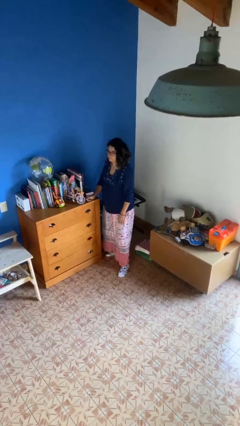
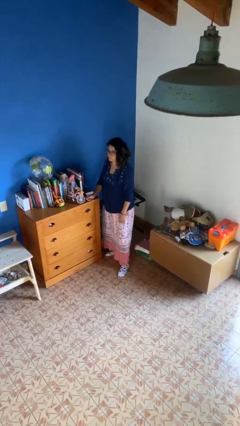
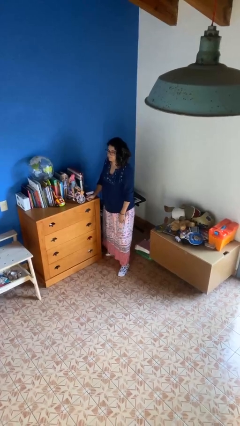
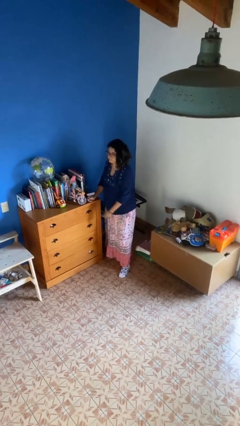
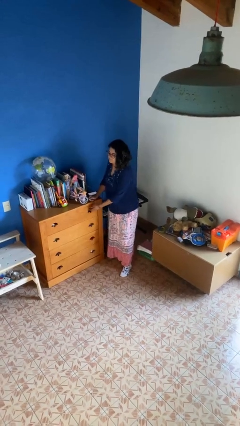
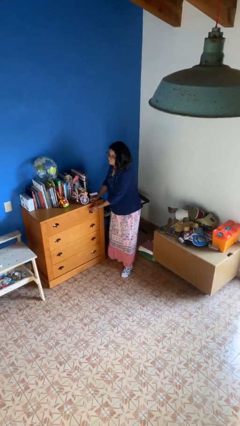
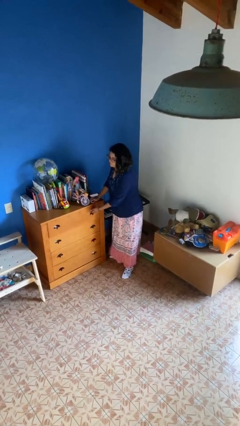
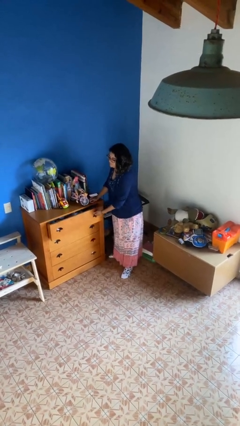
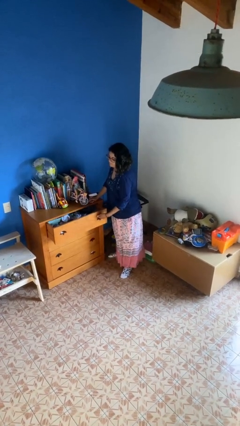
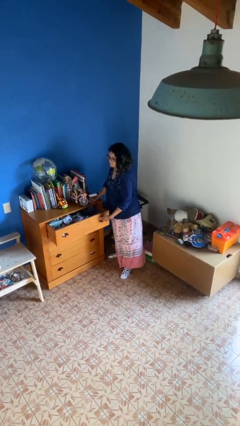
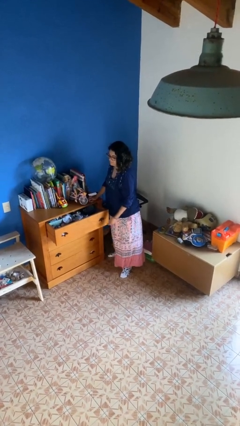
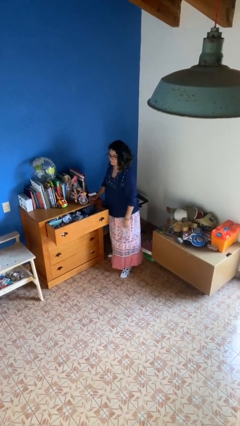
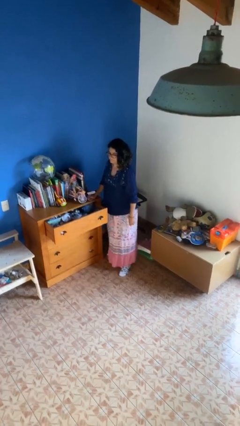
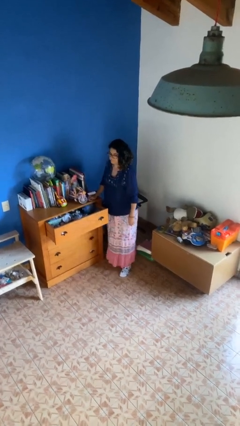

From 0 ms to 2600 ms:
person opens dresser drawer

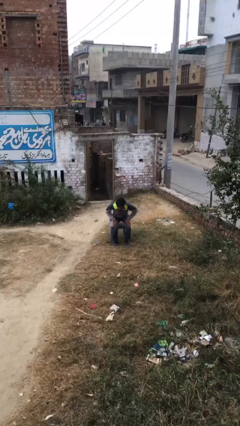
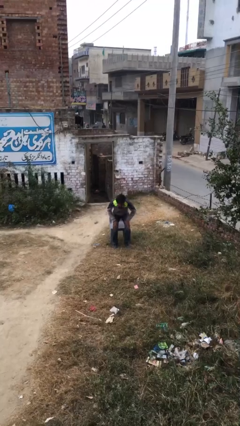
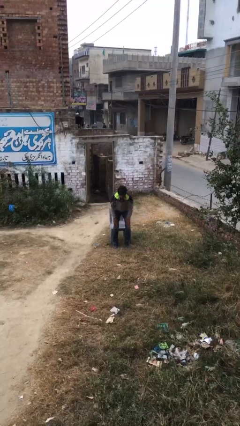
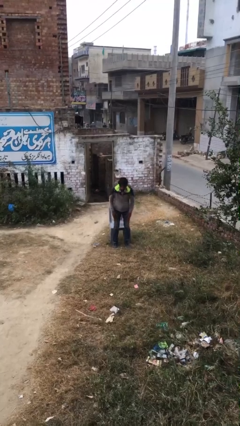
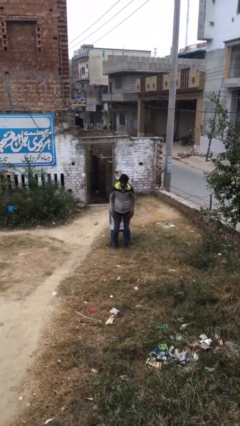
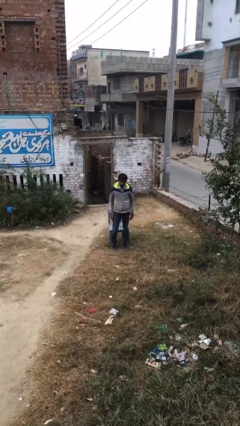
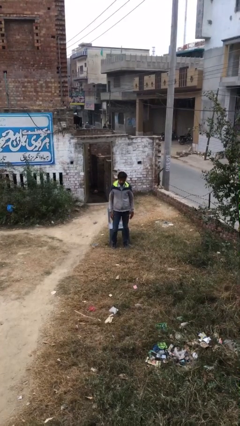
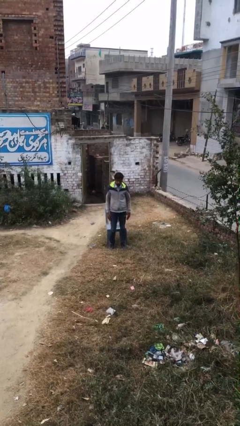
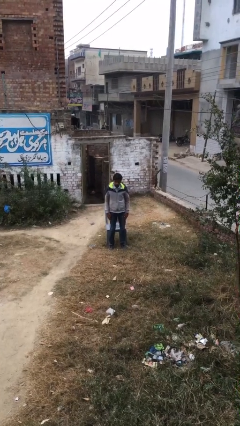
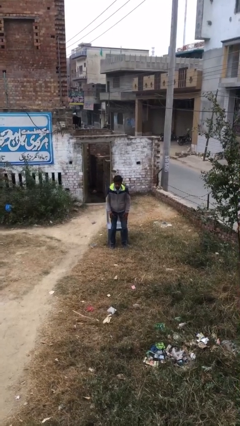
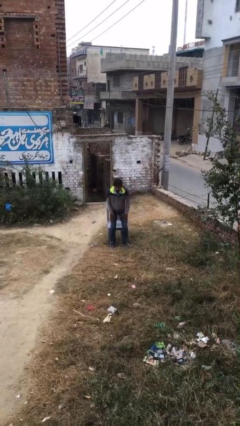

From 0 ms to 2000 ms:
person stands up

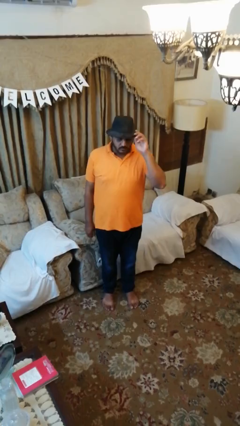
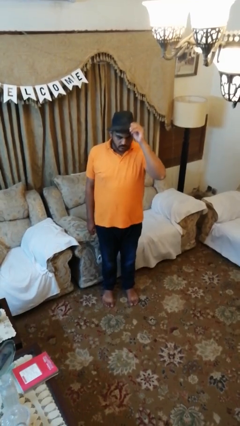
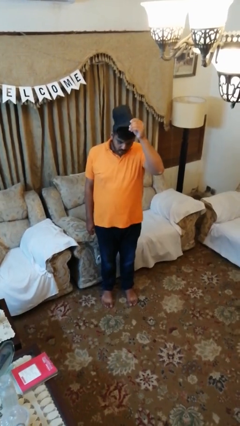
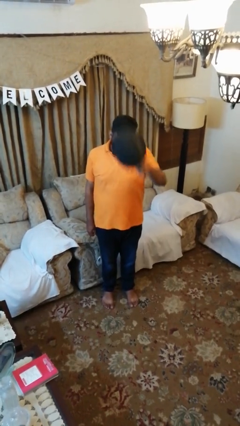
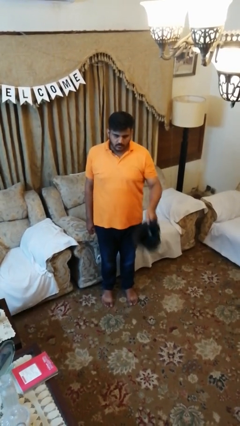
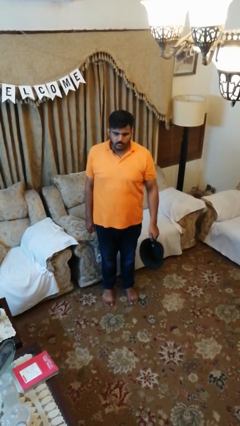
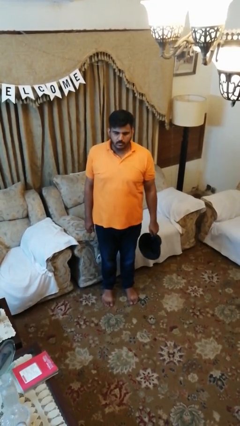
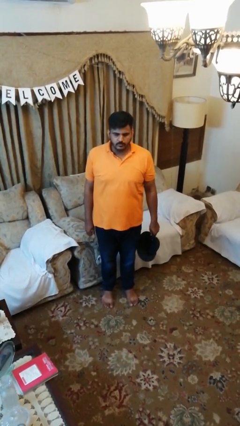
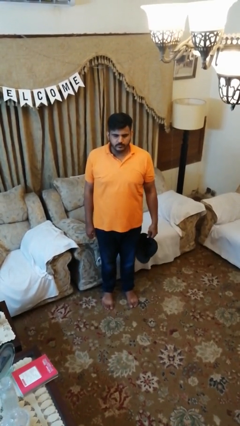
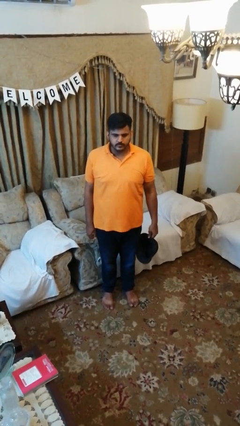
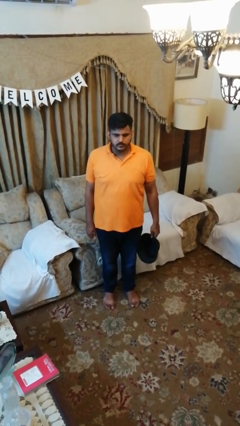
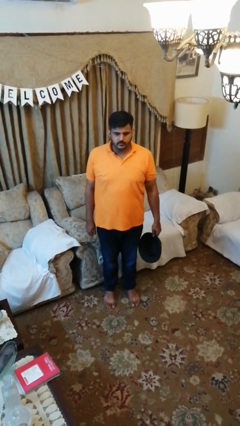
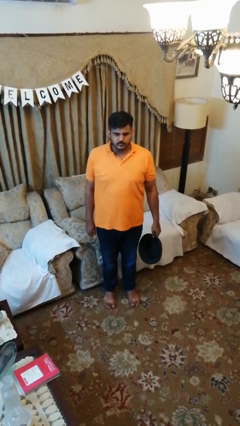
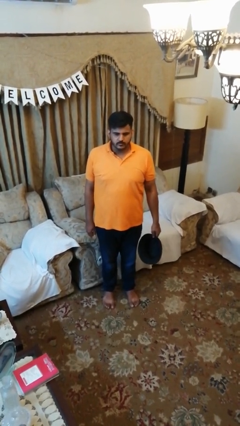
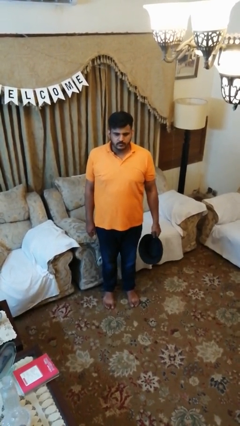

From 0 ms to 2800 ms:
person takes off hat

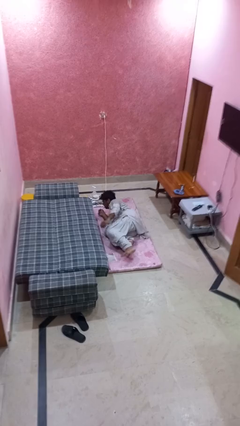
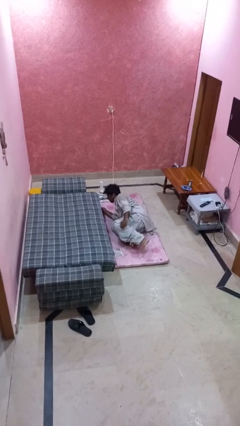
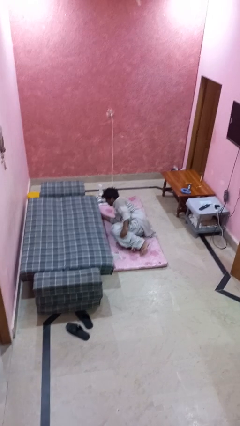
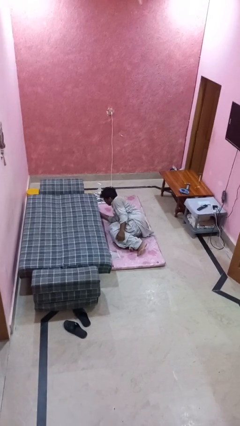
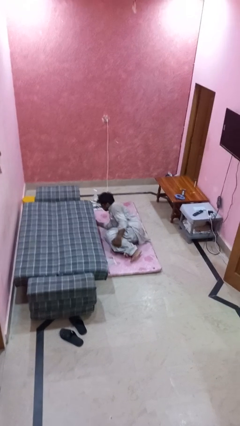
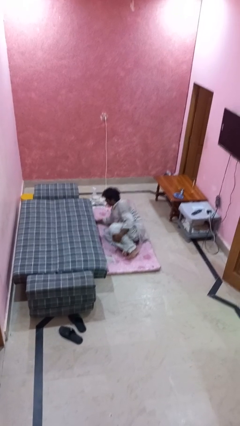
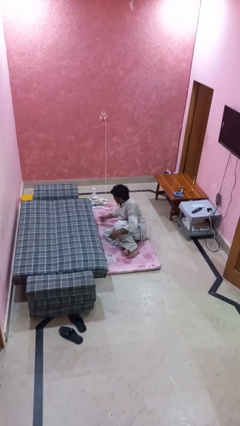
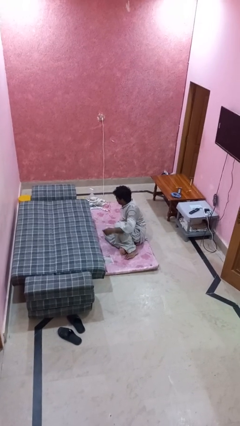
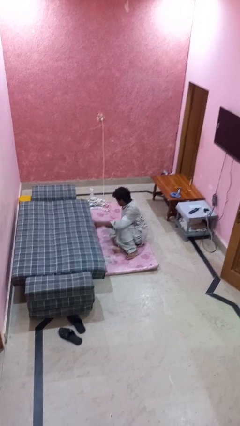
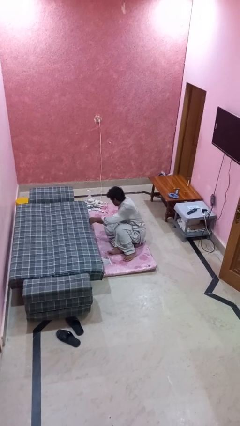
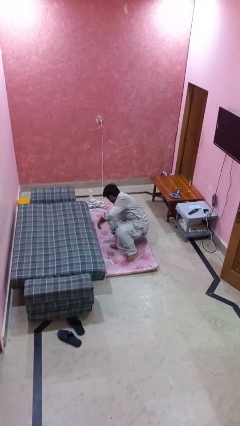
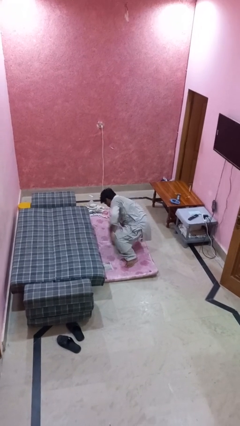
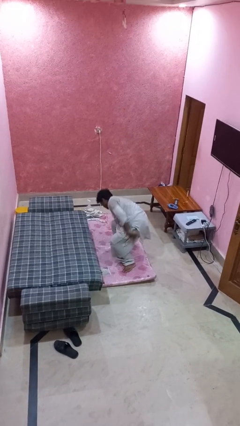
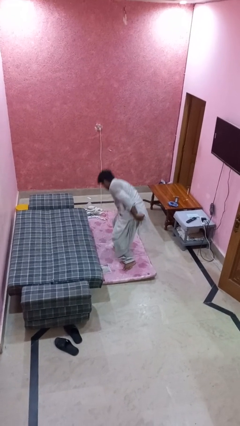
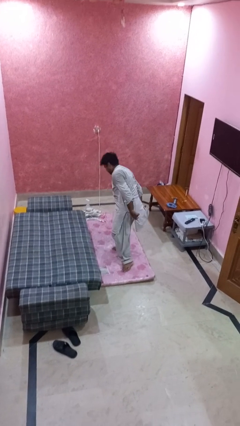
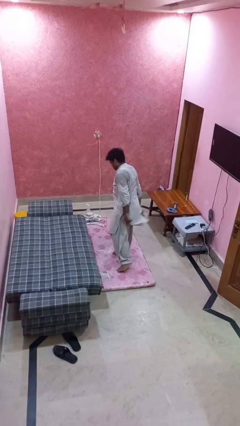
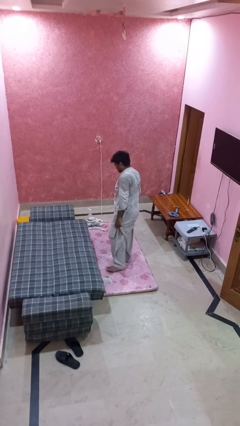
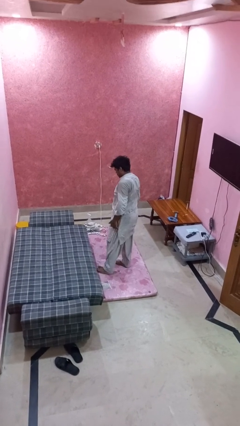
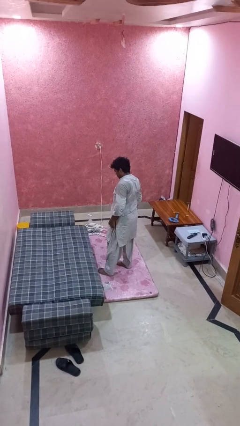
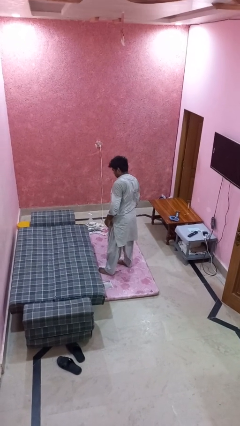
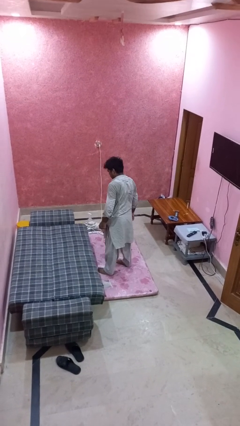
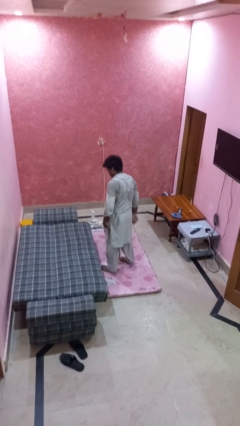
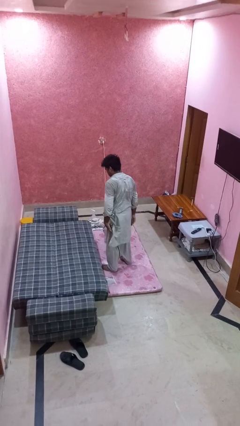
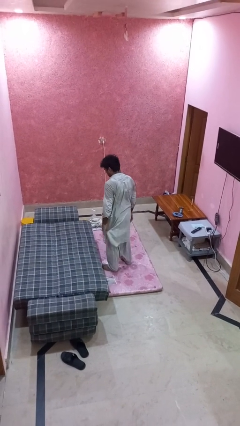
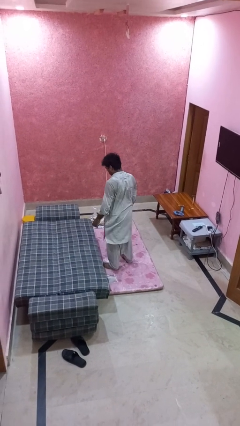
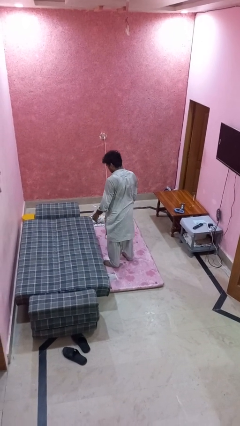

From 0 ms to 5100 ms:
person stands up from floor

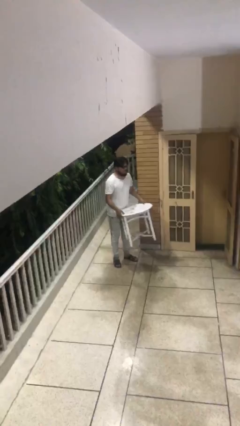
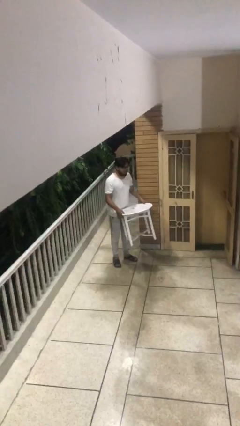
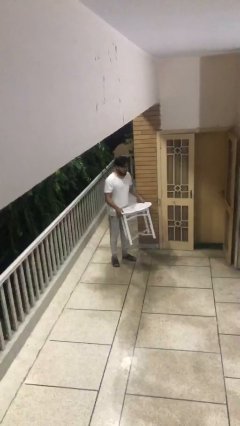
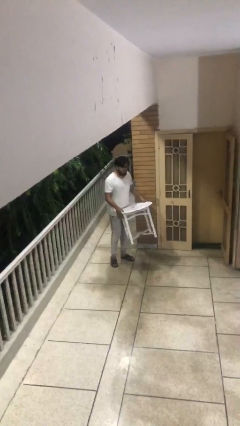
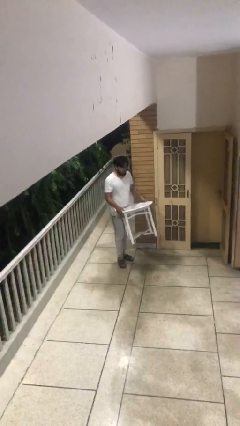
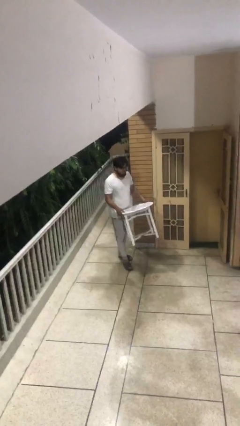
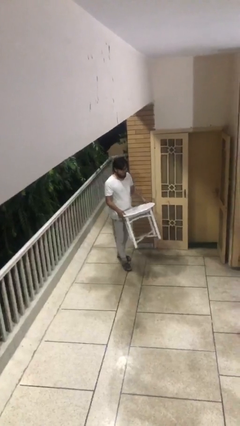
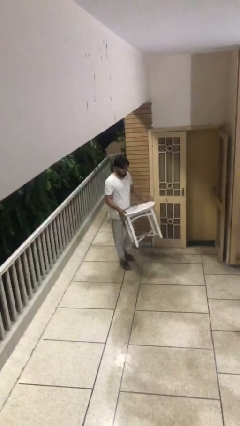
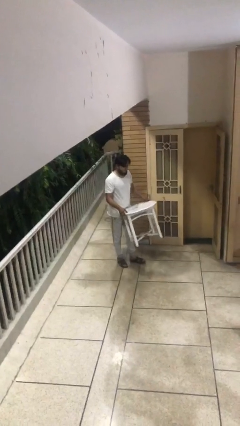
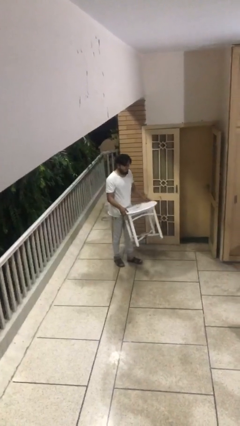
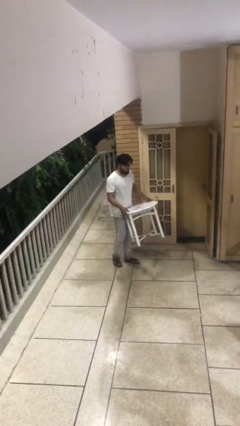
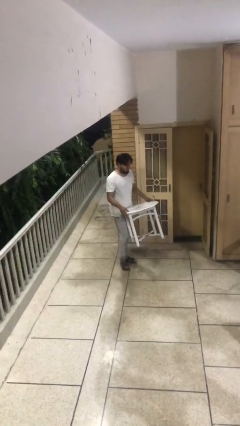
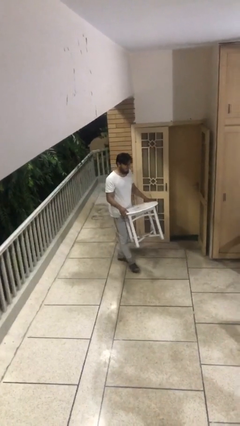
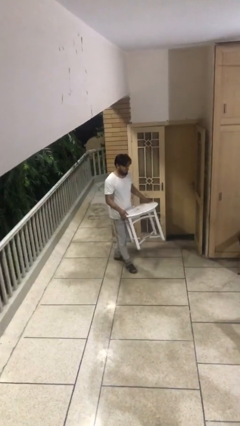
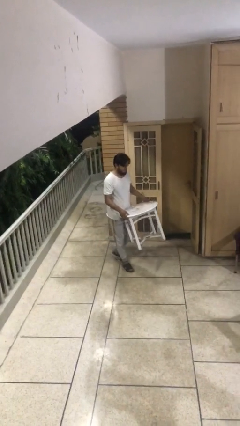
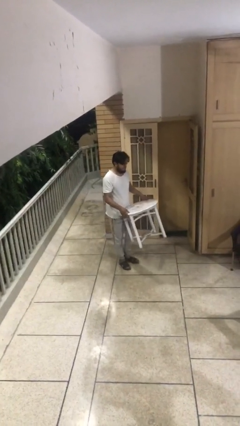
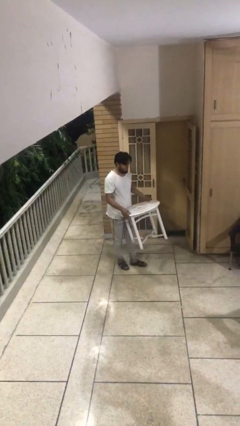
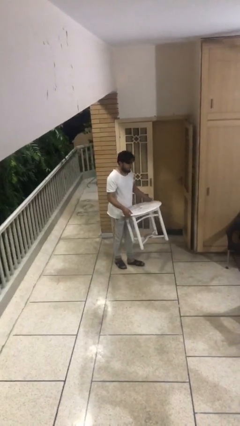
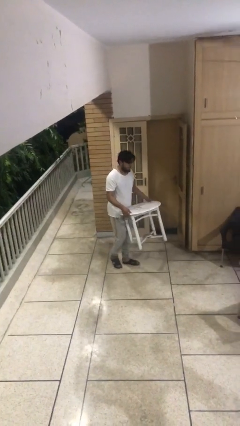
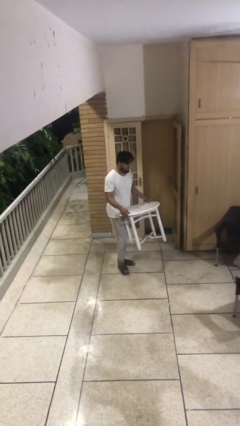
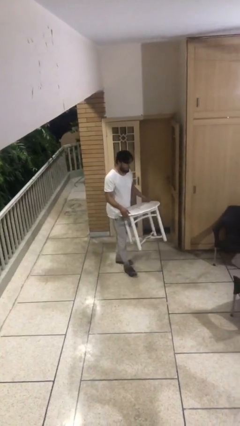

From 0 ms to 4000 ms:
person carries heavy object

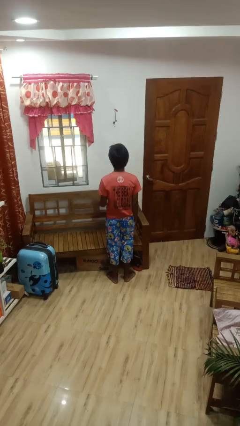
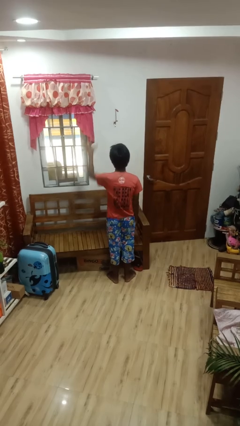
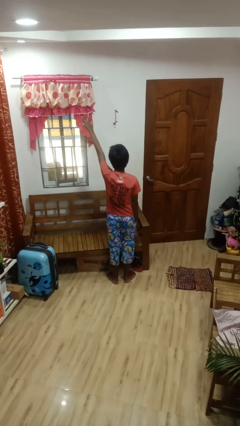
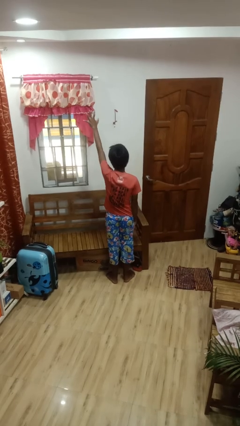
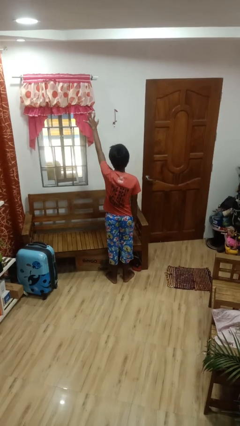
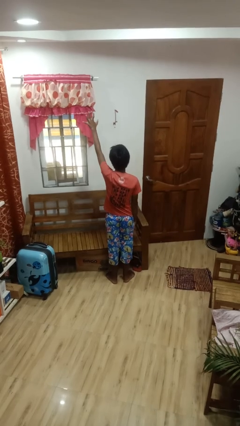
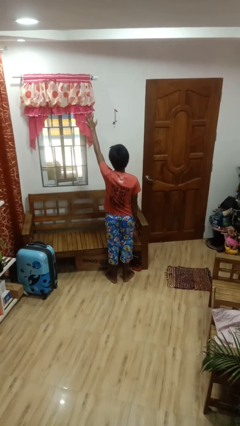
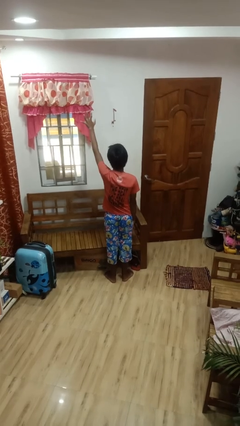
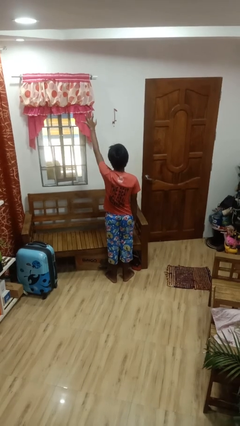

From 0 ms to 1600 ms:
person gestures number five
